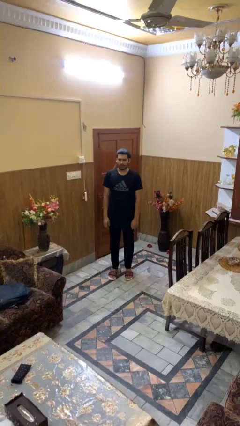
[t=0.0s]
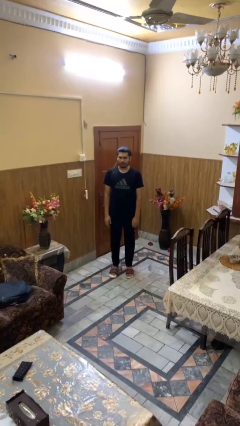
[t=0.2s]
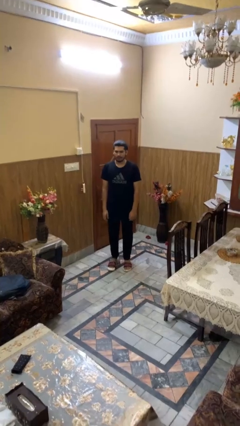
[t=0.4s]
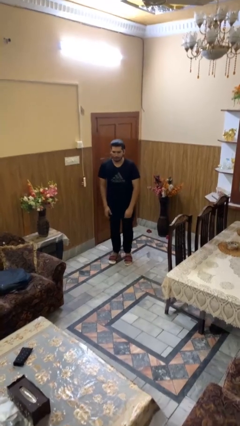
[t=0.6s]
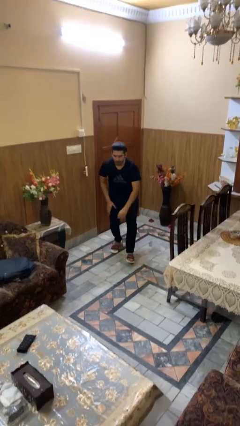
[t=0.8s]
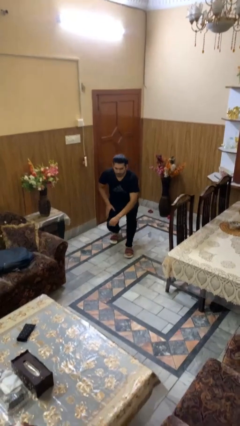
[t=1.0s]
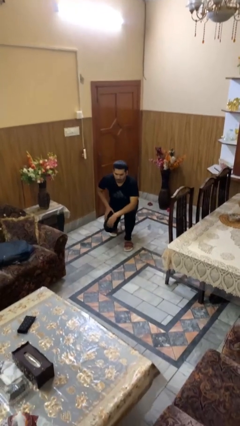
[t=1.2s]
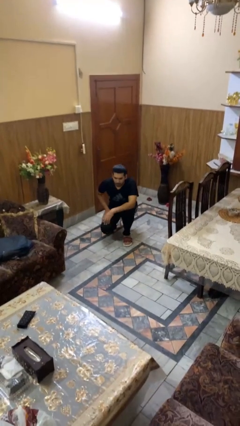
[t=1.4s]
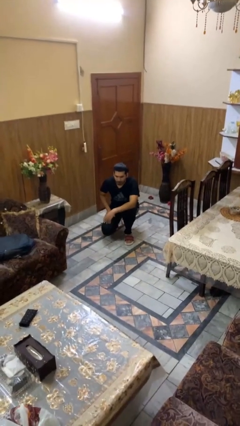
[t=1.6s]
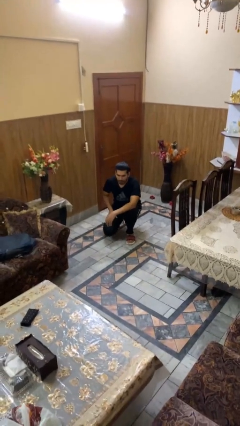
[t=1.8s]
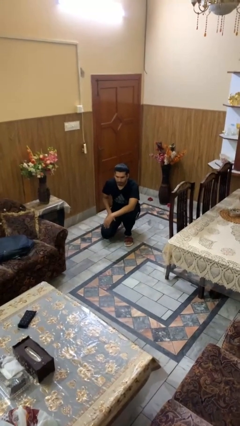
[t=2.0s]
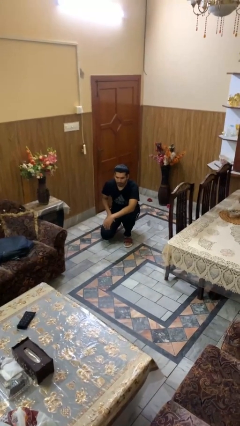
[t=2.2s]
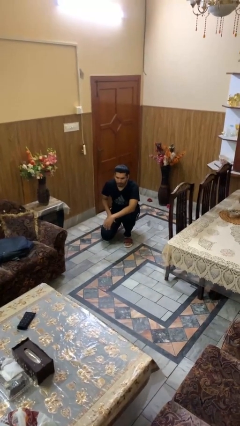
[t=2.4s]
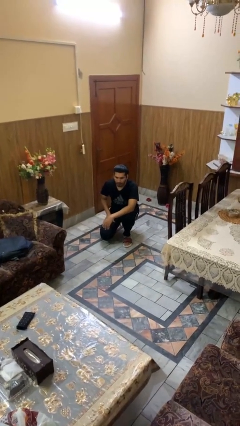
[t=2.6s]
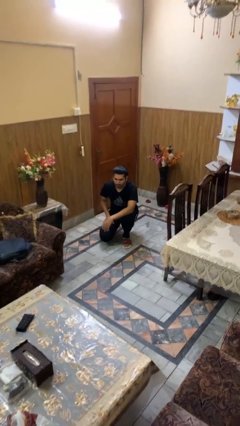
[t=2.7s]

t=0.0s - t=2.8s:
person kneels

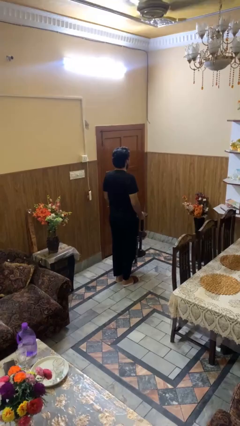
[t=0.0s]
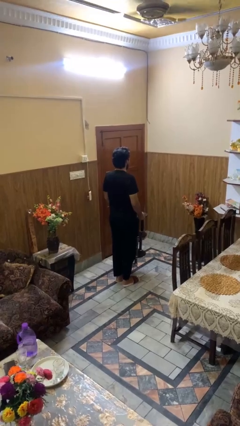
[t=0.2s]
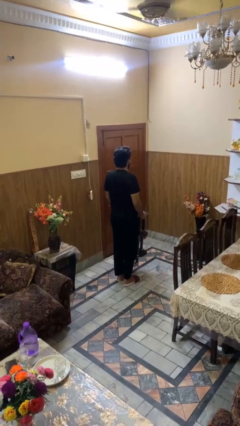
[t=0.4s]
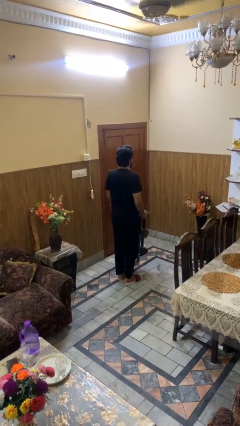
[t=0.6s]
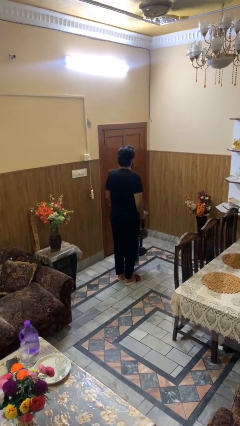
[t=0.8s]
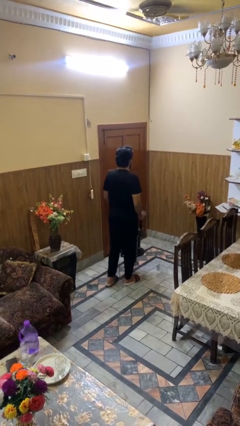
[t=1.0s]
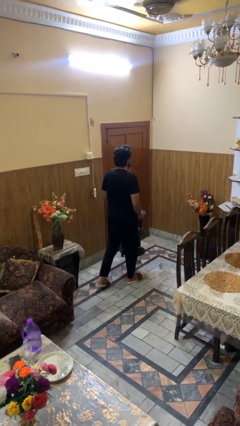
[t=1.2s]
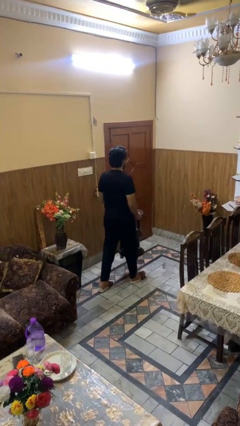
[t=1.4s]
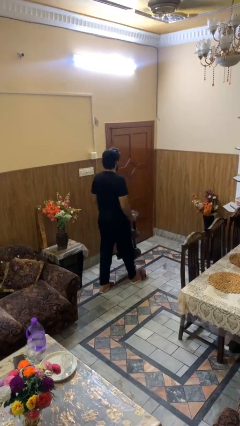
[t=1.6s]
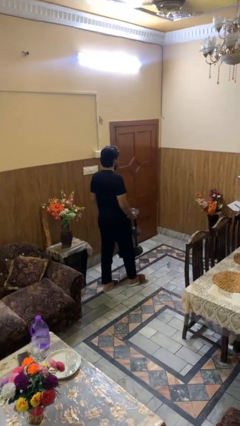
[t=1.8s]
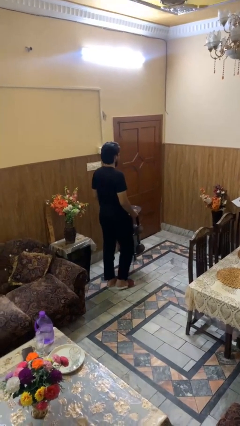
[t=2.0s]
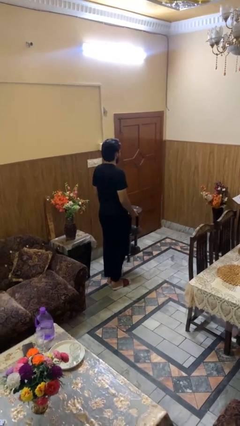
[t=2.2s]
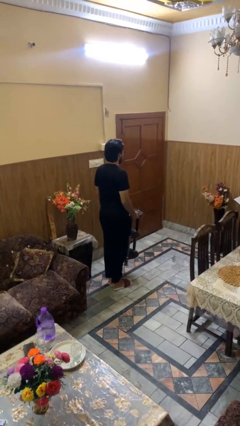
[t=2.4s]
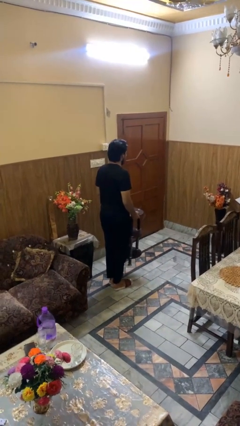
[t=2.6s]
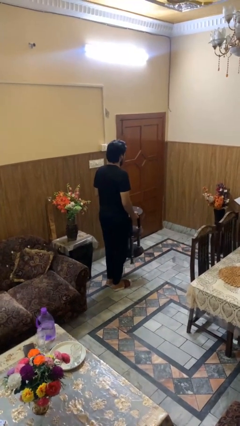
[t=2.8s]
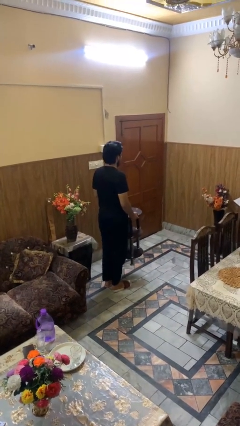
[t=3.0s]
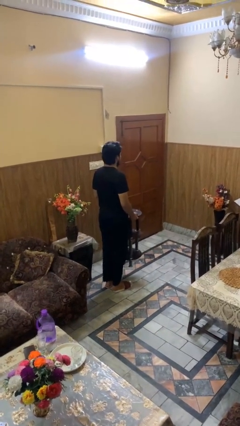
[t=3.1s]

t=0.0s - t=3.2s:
person carries furniture

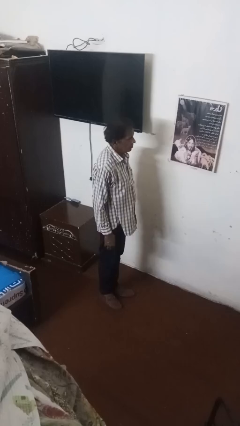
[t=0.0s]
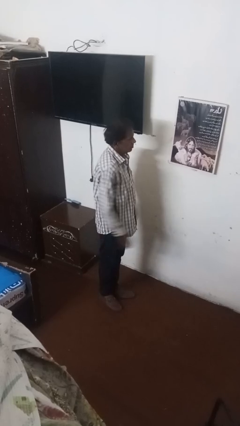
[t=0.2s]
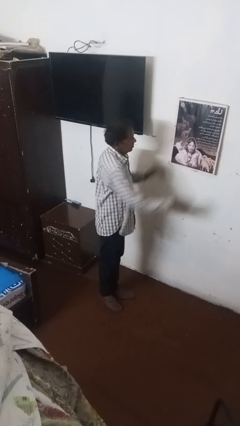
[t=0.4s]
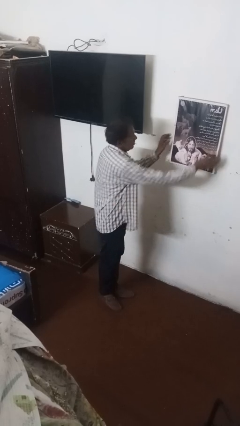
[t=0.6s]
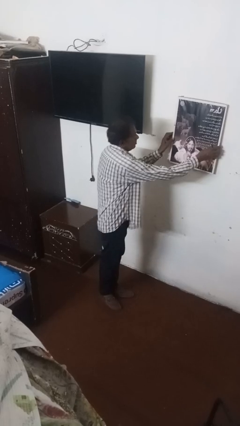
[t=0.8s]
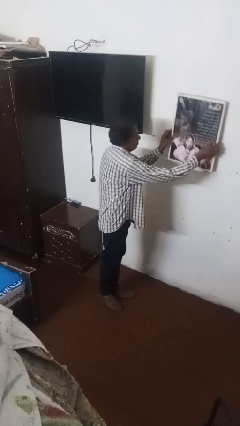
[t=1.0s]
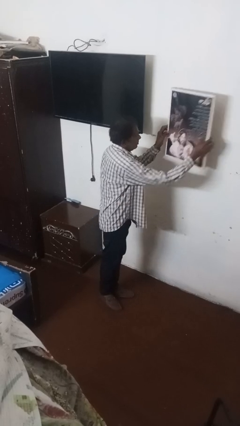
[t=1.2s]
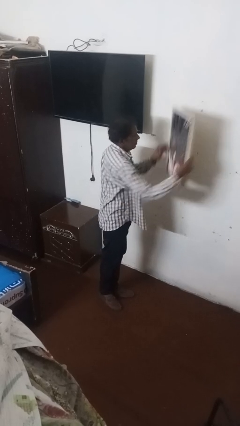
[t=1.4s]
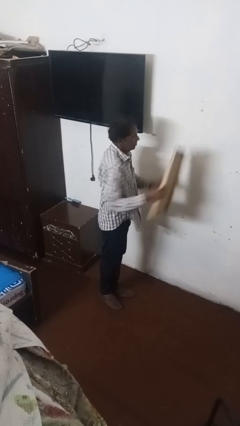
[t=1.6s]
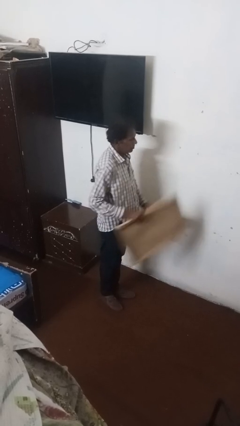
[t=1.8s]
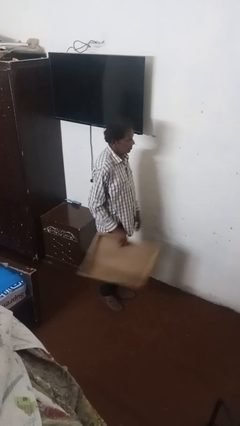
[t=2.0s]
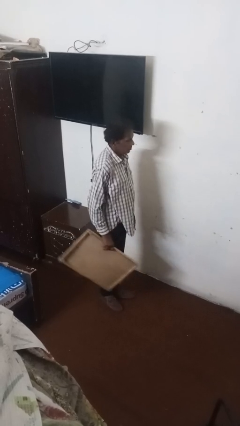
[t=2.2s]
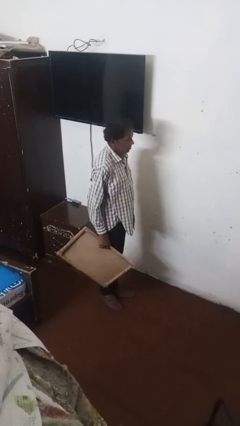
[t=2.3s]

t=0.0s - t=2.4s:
person takes down picture frame

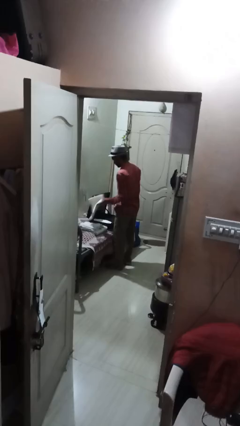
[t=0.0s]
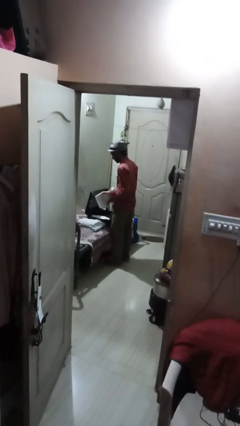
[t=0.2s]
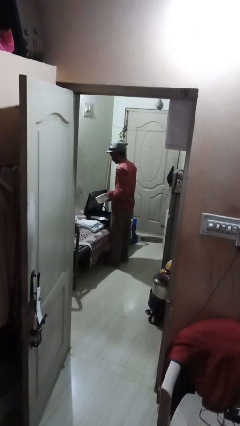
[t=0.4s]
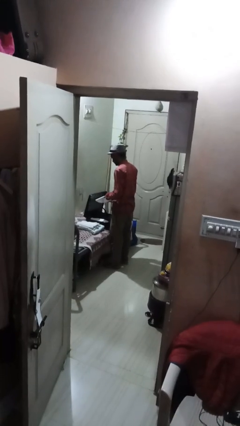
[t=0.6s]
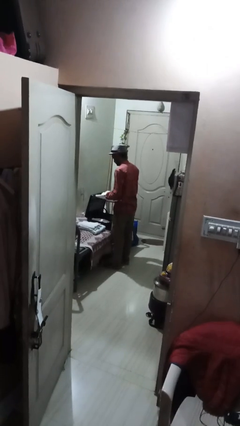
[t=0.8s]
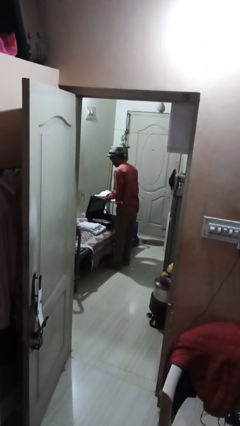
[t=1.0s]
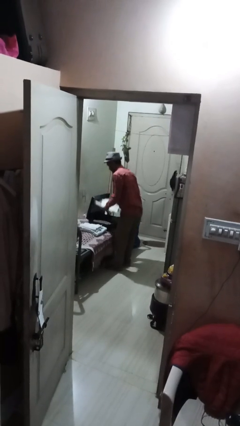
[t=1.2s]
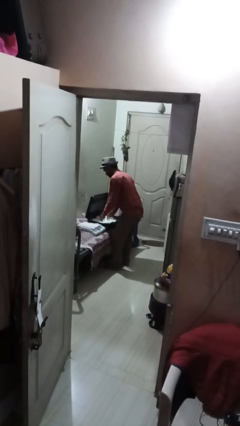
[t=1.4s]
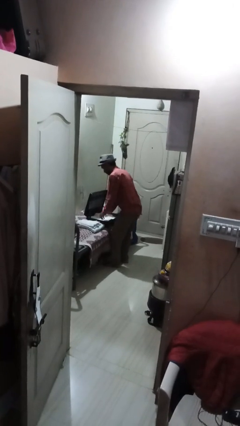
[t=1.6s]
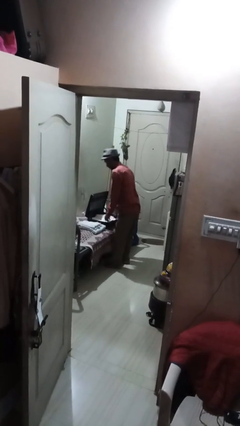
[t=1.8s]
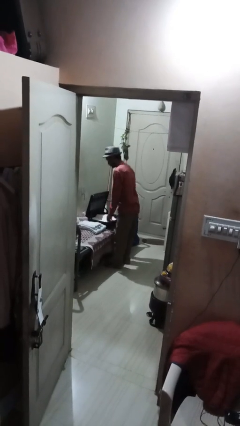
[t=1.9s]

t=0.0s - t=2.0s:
person loads clothes into suitcase

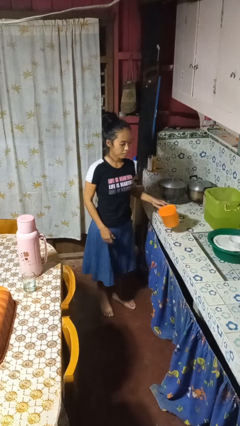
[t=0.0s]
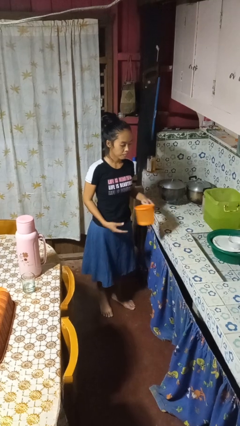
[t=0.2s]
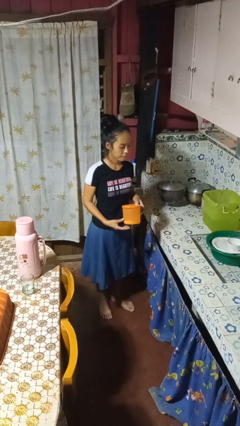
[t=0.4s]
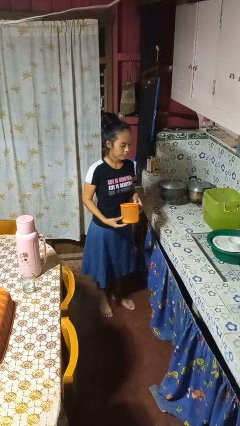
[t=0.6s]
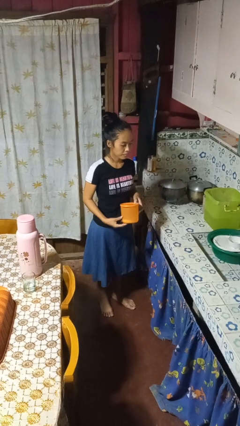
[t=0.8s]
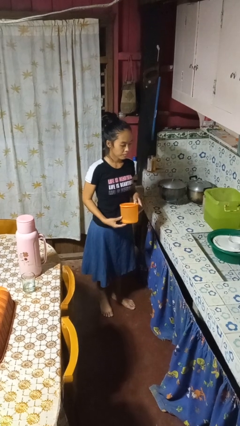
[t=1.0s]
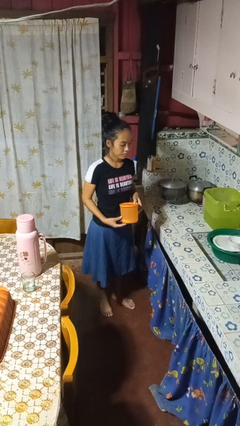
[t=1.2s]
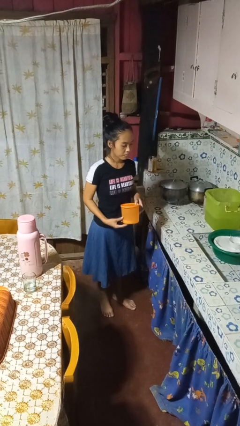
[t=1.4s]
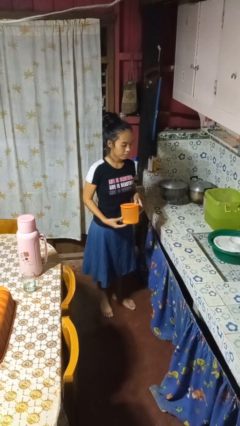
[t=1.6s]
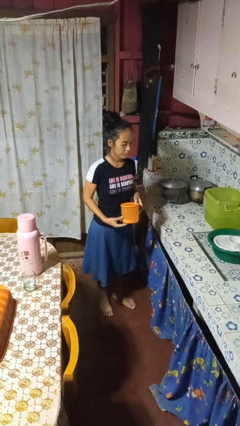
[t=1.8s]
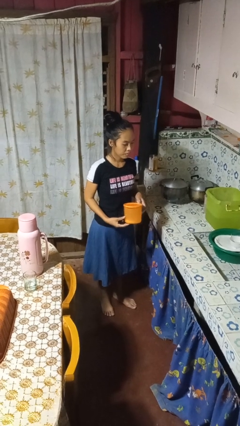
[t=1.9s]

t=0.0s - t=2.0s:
person picks up object from countertop

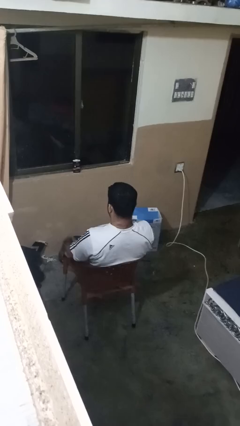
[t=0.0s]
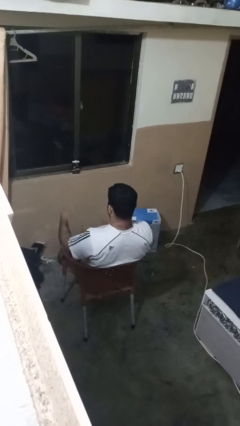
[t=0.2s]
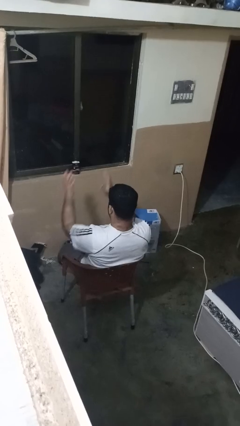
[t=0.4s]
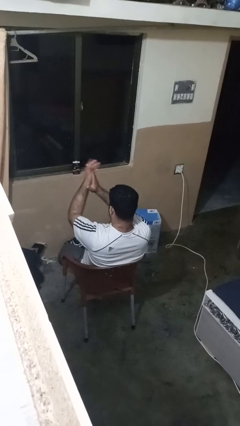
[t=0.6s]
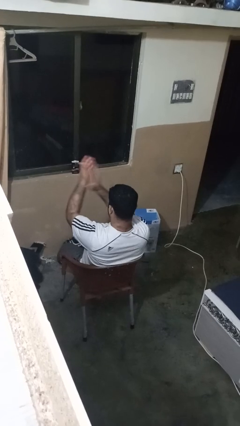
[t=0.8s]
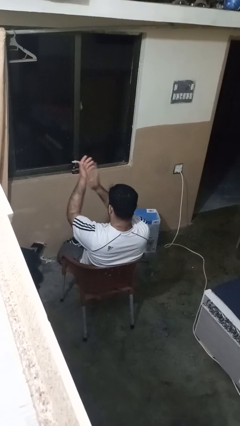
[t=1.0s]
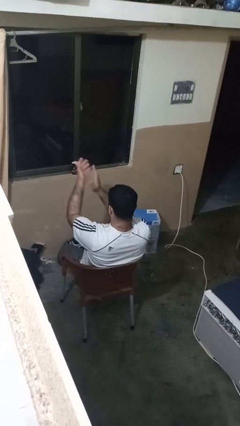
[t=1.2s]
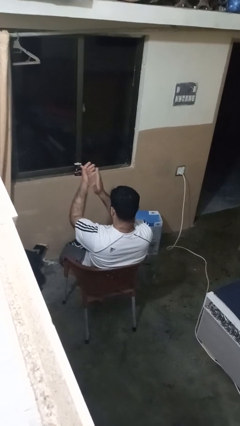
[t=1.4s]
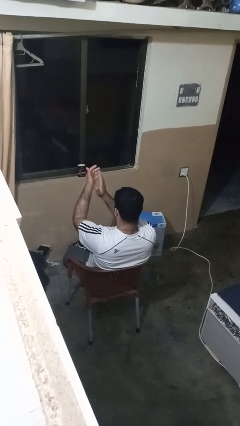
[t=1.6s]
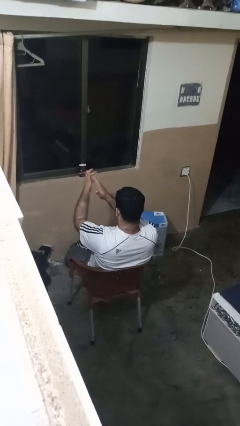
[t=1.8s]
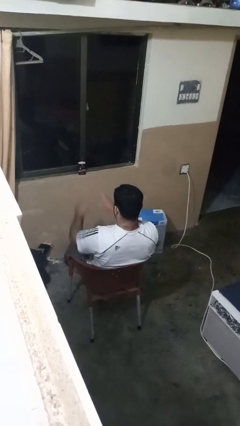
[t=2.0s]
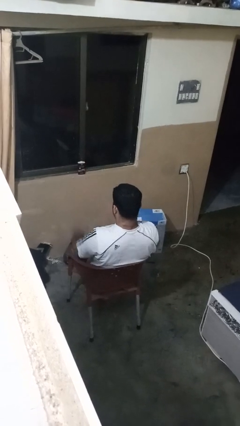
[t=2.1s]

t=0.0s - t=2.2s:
person claps hands

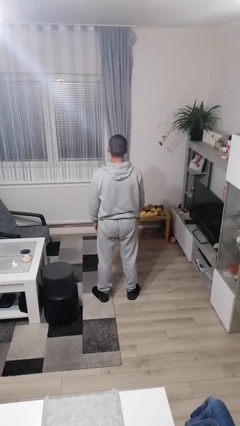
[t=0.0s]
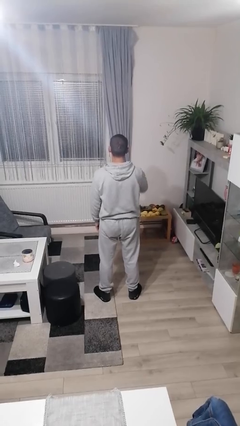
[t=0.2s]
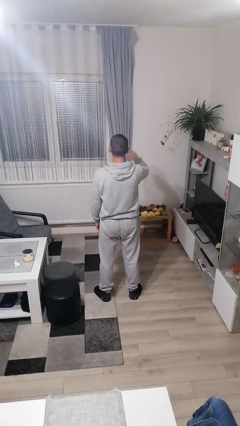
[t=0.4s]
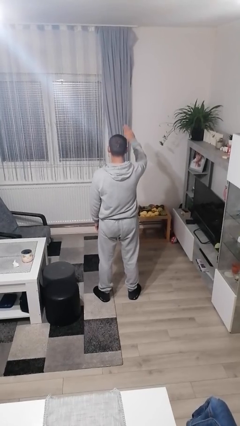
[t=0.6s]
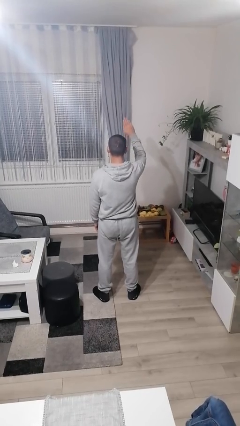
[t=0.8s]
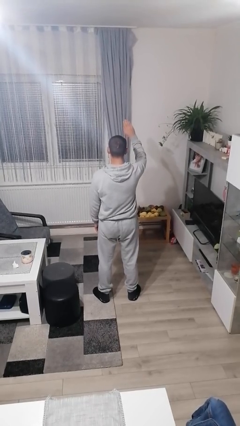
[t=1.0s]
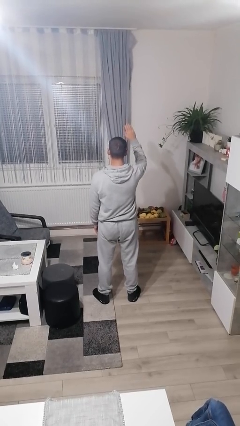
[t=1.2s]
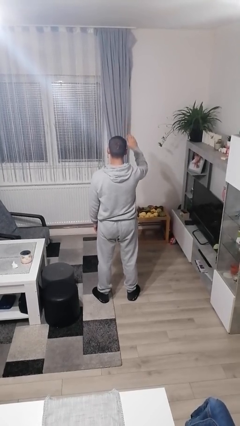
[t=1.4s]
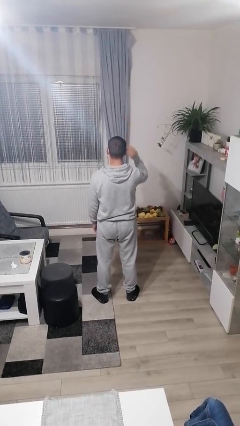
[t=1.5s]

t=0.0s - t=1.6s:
person salutes

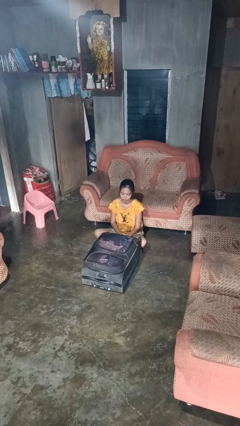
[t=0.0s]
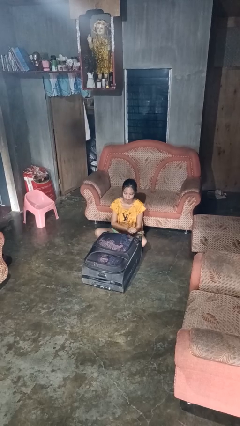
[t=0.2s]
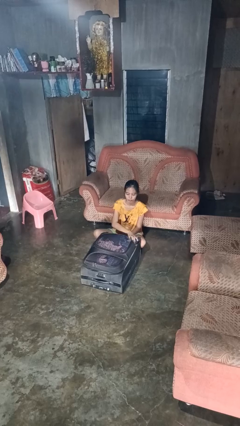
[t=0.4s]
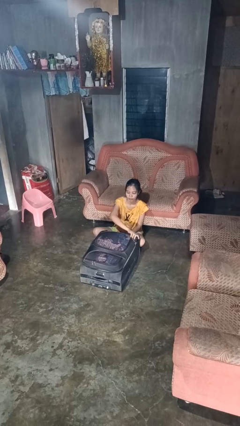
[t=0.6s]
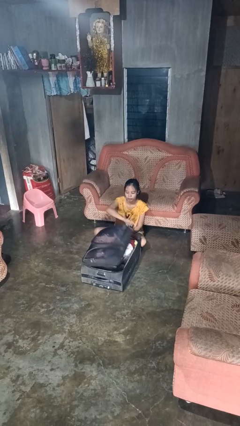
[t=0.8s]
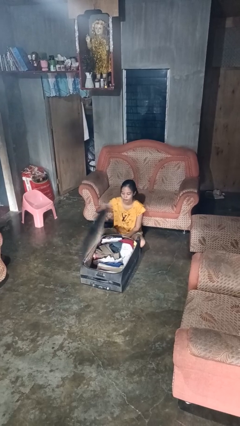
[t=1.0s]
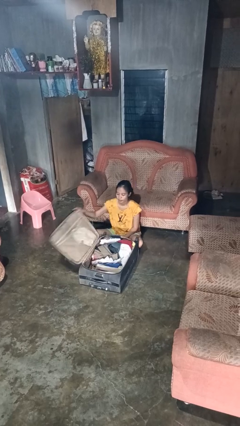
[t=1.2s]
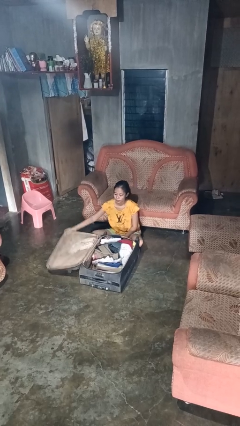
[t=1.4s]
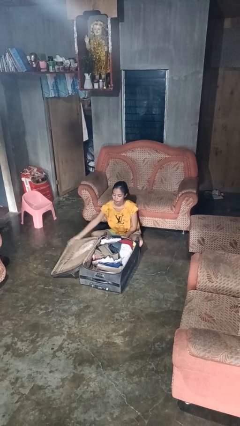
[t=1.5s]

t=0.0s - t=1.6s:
person opens suitcase
